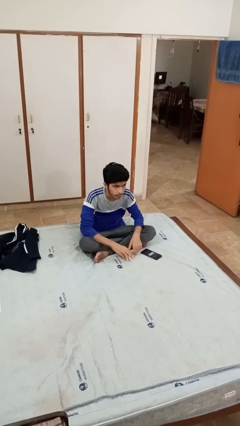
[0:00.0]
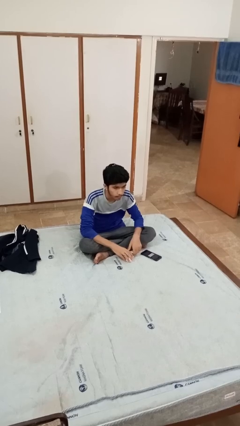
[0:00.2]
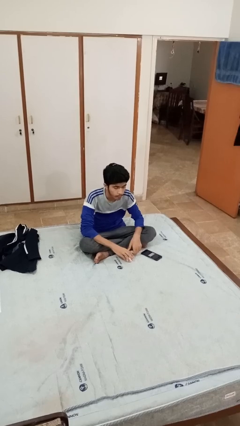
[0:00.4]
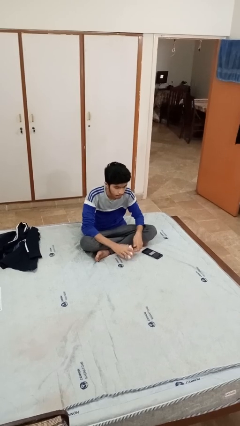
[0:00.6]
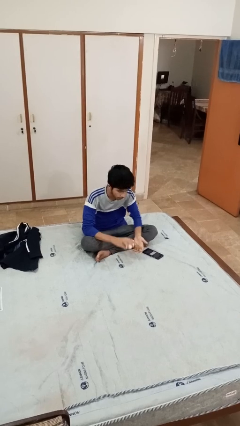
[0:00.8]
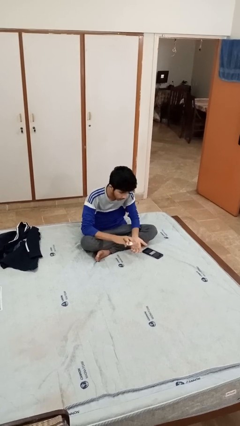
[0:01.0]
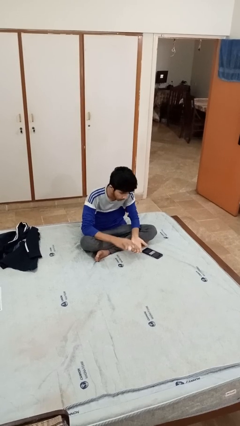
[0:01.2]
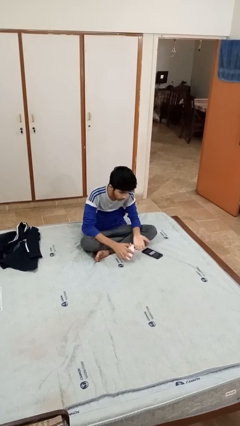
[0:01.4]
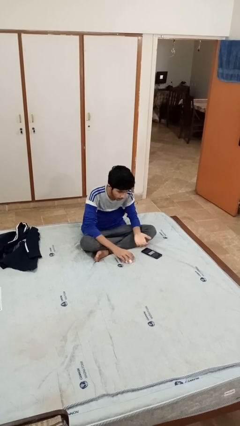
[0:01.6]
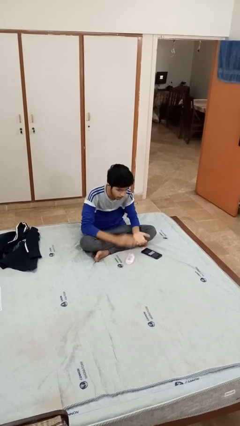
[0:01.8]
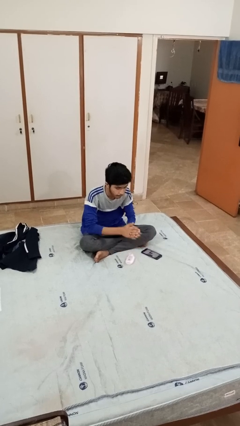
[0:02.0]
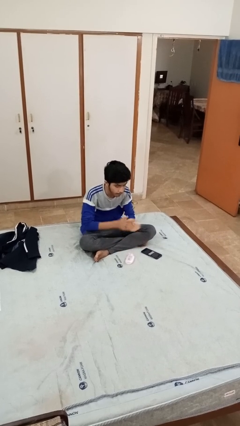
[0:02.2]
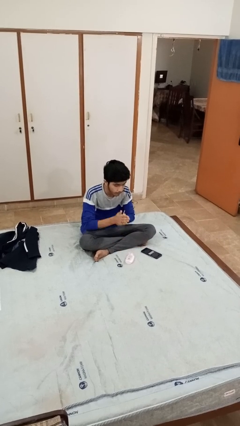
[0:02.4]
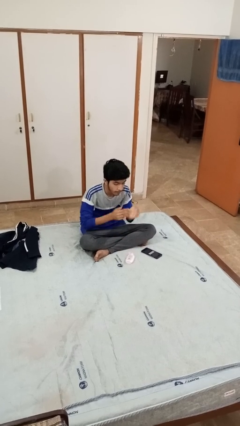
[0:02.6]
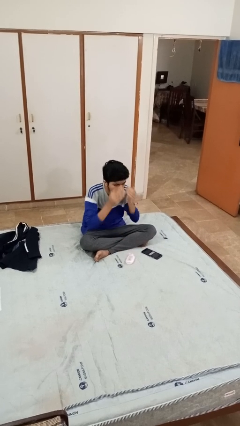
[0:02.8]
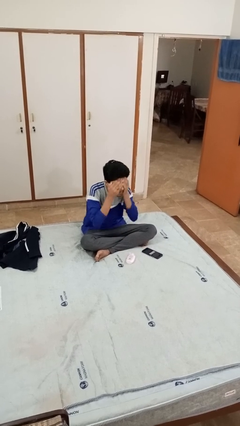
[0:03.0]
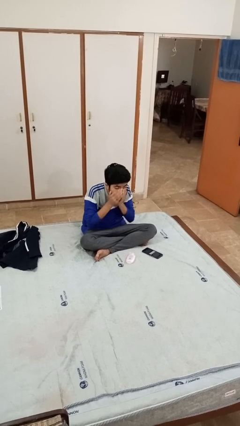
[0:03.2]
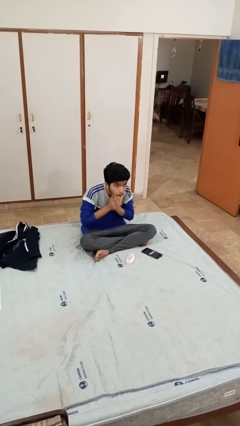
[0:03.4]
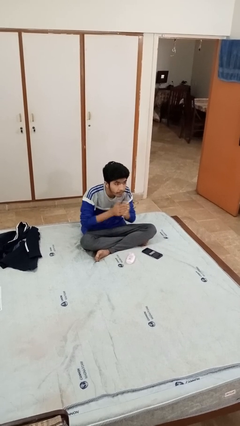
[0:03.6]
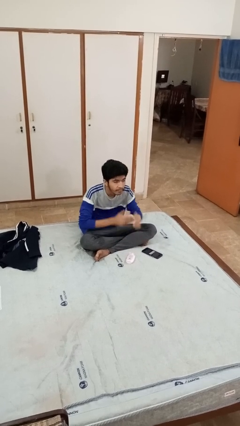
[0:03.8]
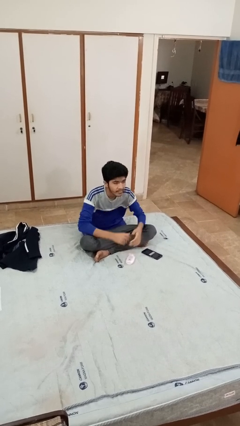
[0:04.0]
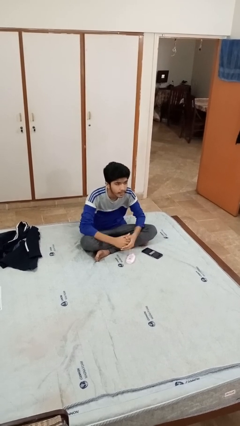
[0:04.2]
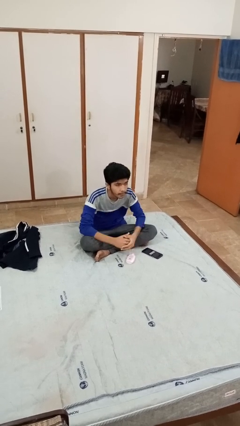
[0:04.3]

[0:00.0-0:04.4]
person applies facial moisturizer

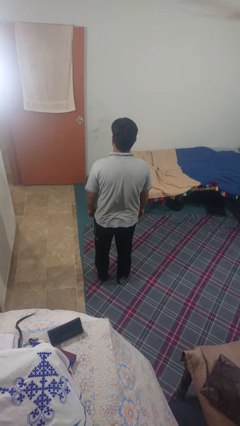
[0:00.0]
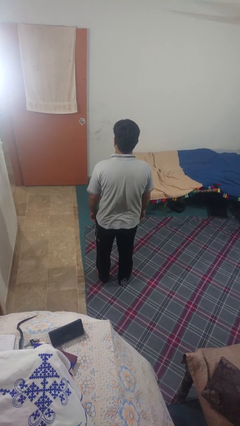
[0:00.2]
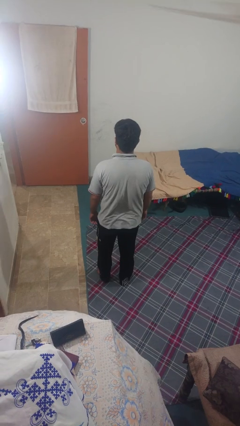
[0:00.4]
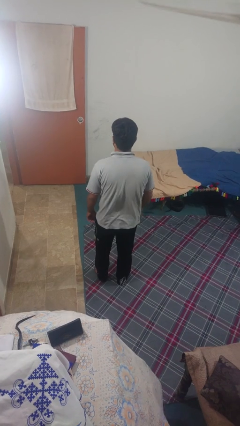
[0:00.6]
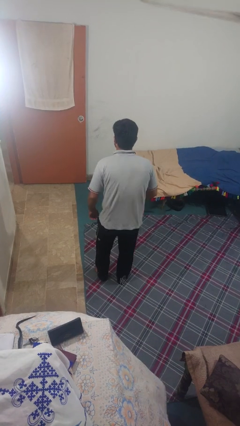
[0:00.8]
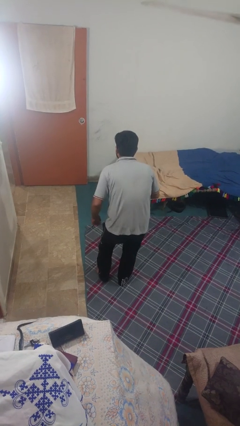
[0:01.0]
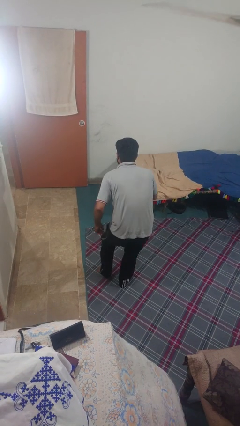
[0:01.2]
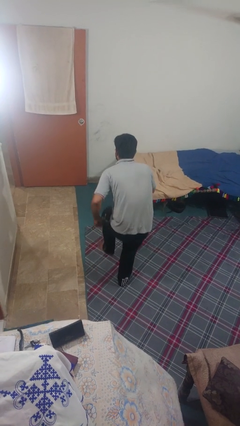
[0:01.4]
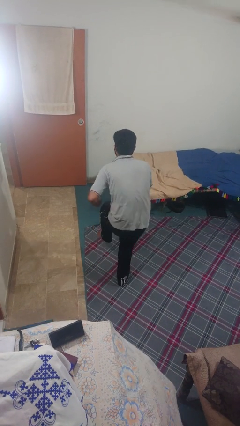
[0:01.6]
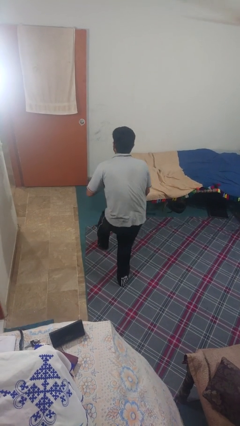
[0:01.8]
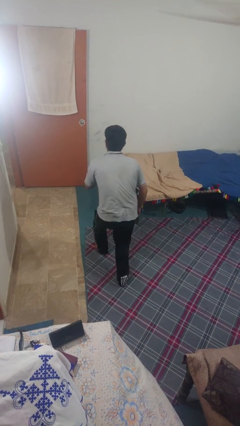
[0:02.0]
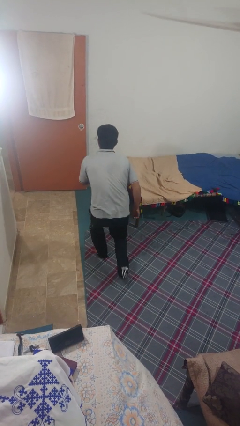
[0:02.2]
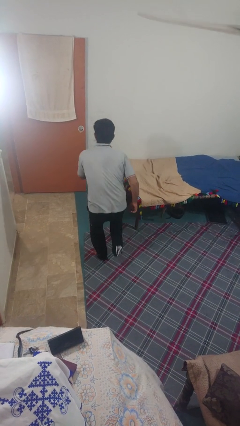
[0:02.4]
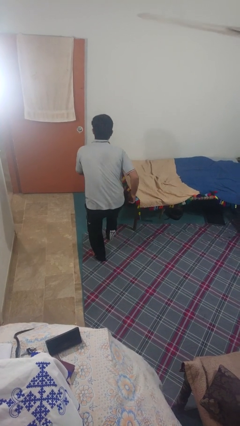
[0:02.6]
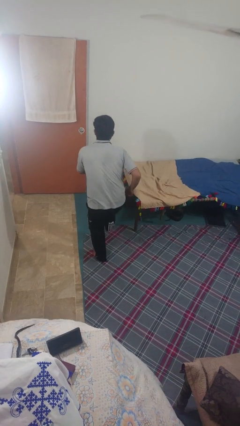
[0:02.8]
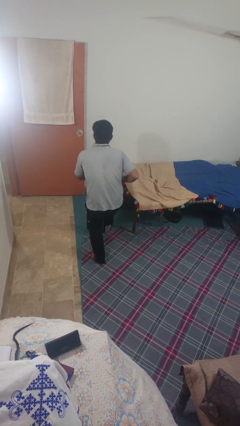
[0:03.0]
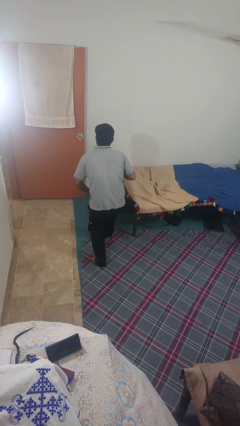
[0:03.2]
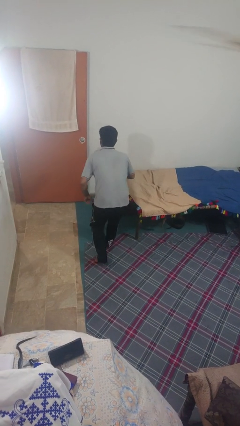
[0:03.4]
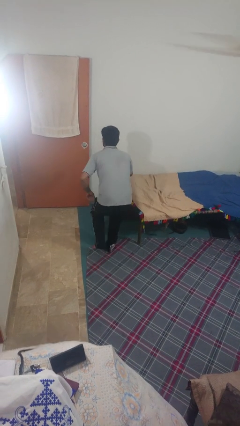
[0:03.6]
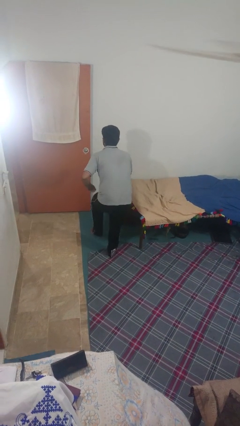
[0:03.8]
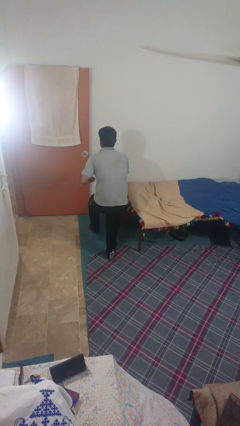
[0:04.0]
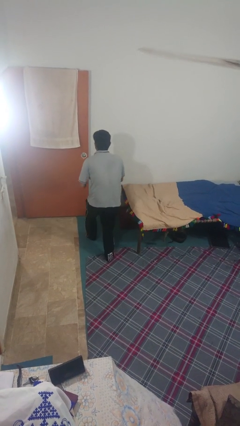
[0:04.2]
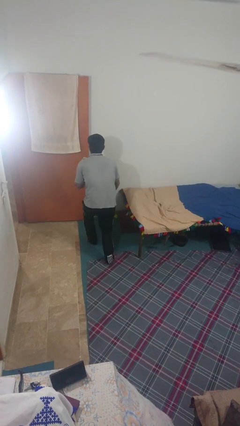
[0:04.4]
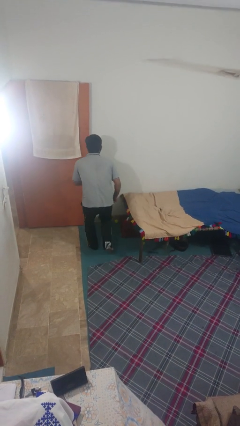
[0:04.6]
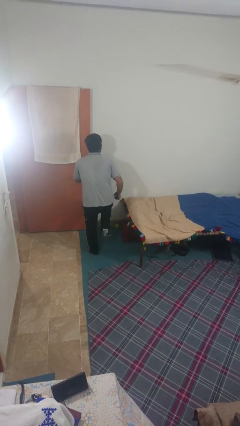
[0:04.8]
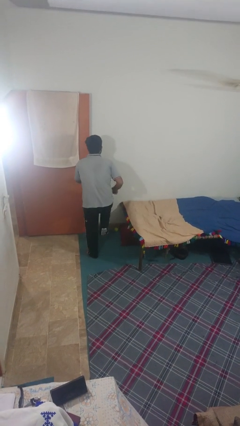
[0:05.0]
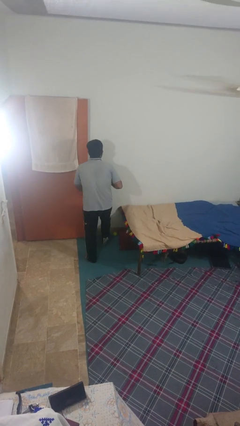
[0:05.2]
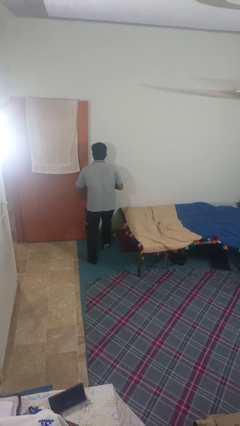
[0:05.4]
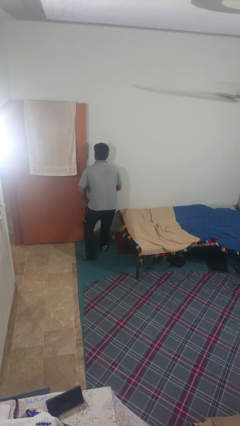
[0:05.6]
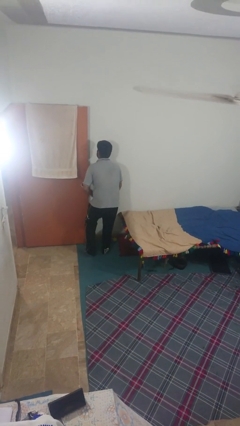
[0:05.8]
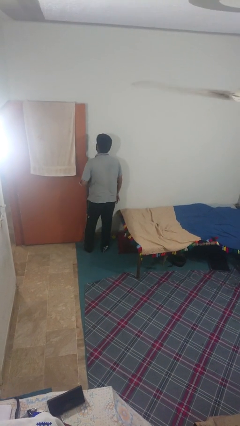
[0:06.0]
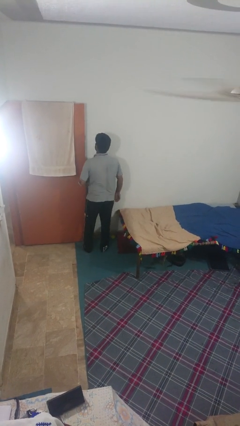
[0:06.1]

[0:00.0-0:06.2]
person walks tiptoe

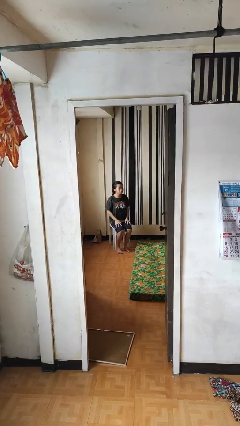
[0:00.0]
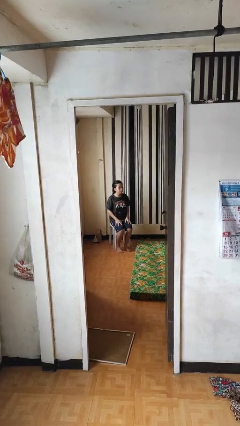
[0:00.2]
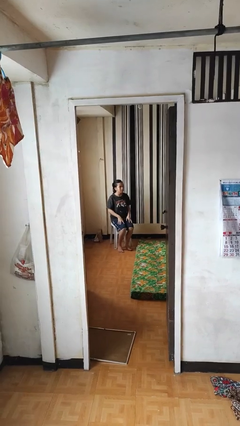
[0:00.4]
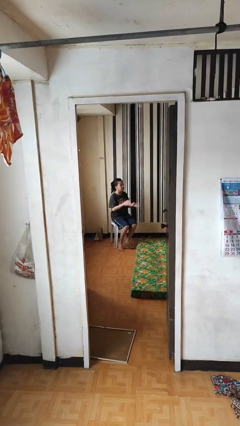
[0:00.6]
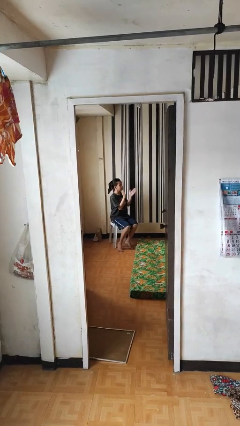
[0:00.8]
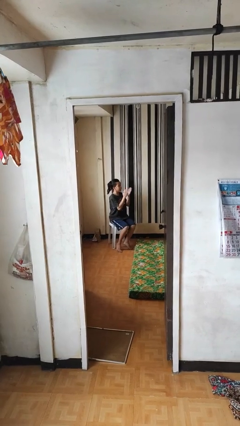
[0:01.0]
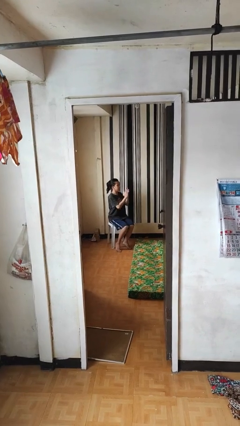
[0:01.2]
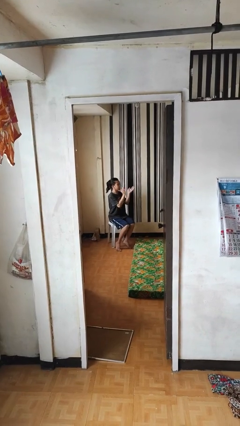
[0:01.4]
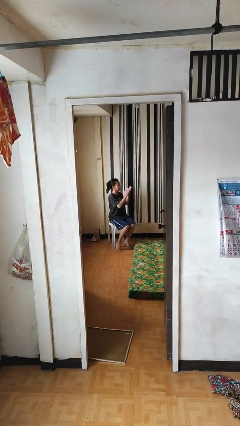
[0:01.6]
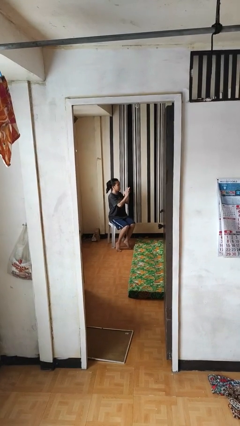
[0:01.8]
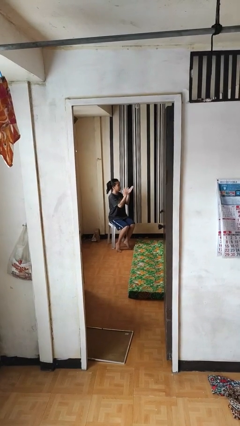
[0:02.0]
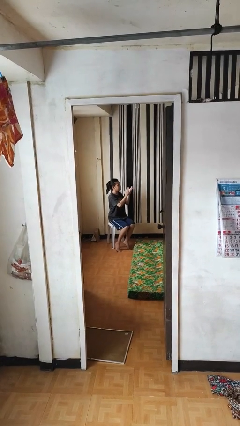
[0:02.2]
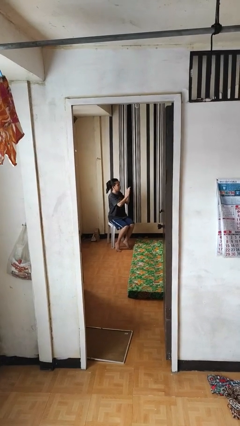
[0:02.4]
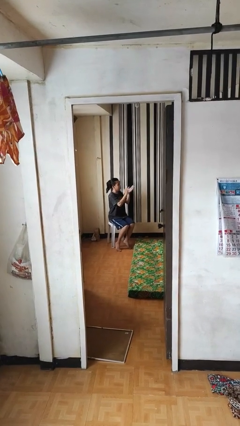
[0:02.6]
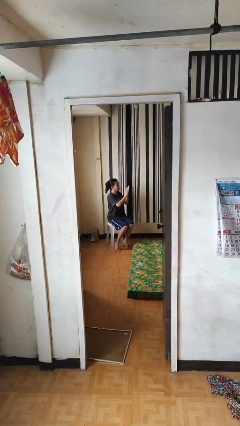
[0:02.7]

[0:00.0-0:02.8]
person claps hands

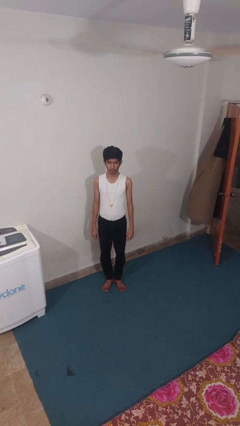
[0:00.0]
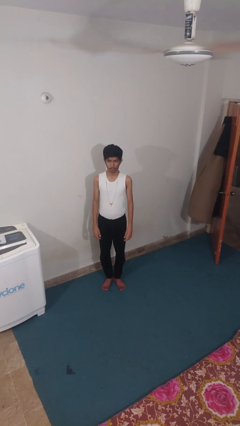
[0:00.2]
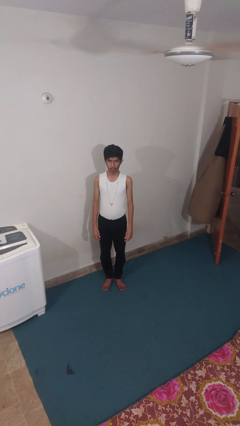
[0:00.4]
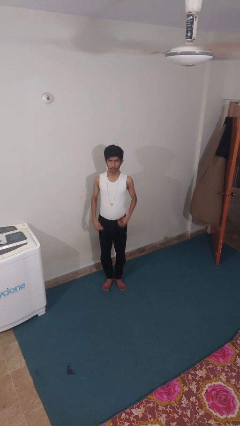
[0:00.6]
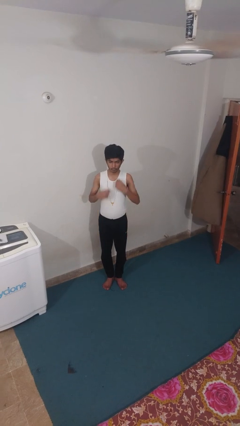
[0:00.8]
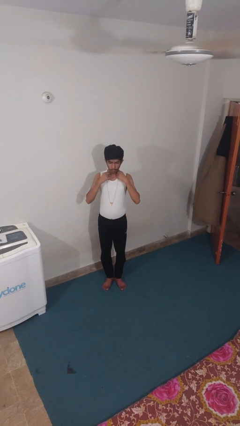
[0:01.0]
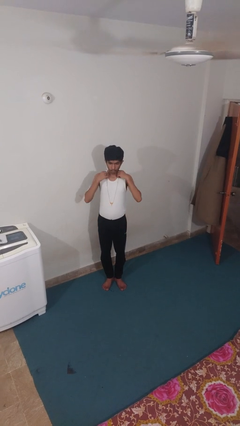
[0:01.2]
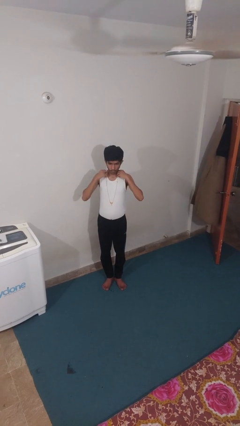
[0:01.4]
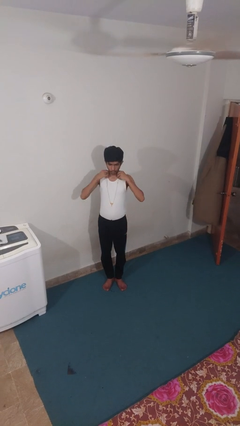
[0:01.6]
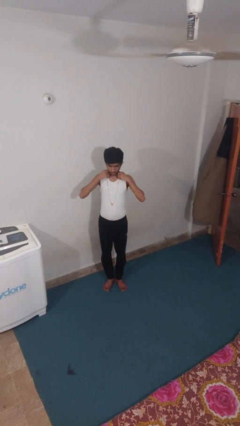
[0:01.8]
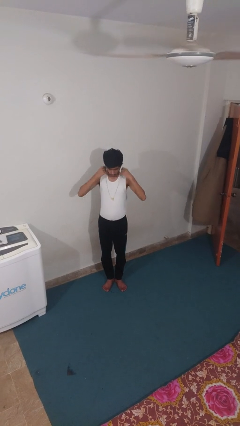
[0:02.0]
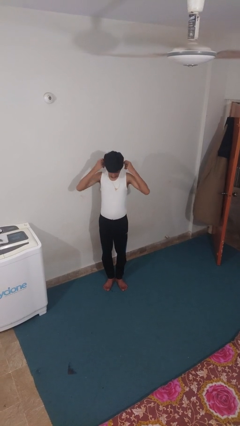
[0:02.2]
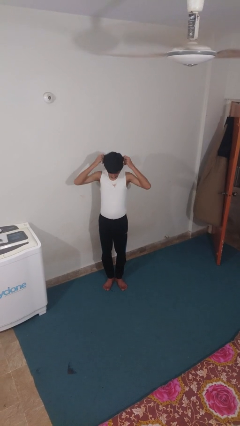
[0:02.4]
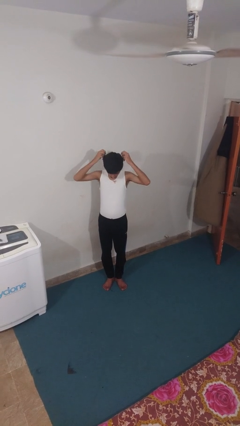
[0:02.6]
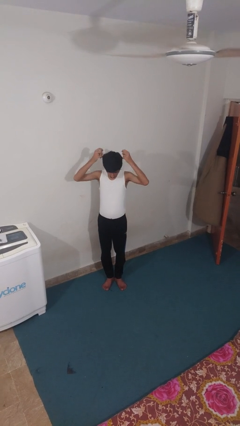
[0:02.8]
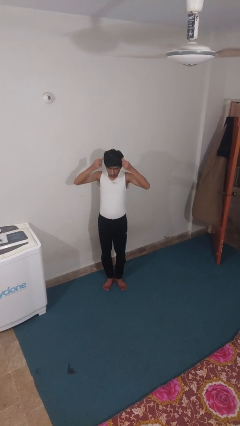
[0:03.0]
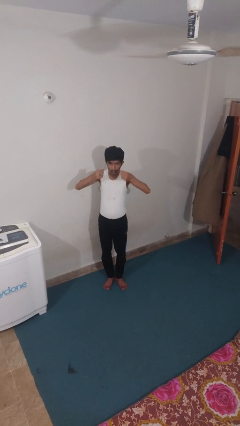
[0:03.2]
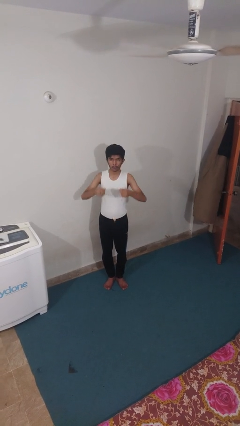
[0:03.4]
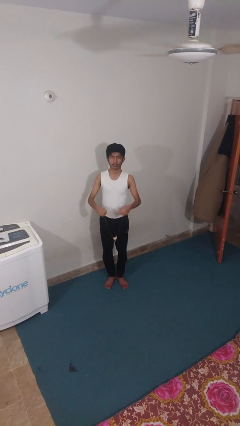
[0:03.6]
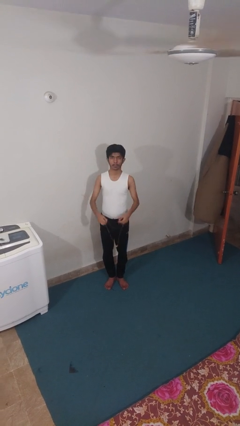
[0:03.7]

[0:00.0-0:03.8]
person takes off necklace

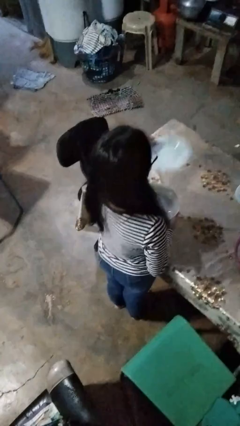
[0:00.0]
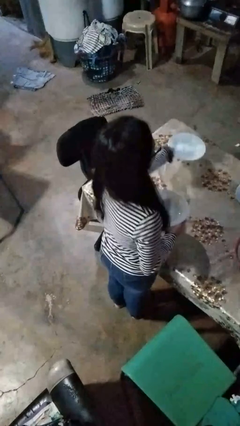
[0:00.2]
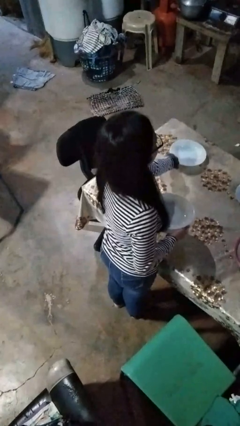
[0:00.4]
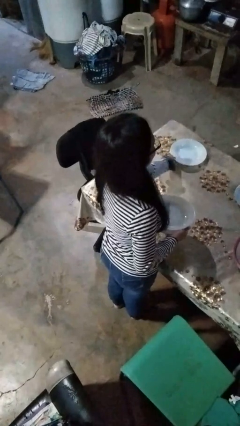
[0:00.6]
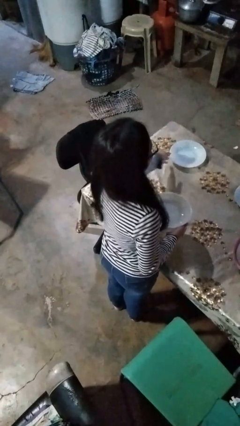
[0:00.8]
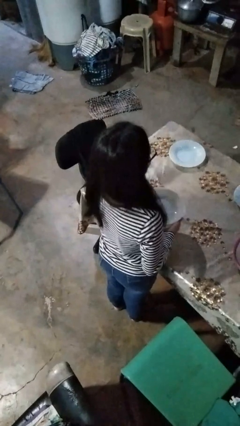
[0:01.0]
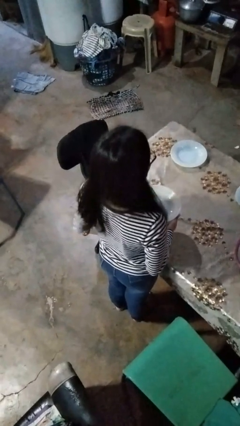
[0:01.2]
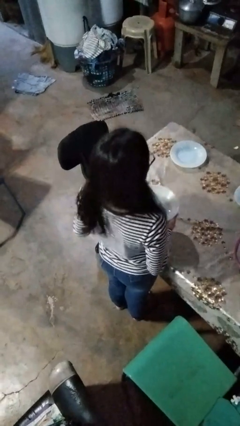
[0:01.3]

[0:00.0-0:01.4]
person sets table
